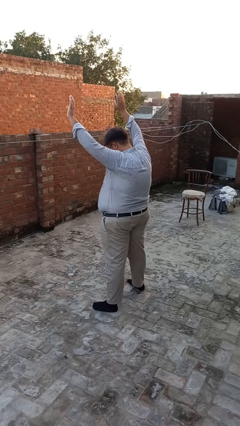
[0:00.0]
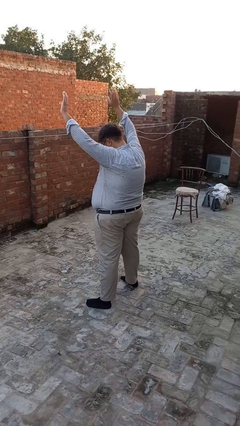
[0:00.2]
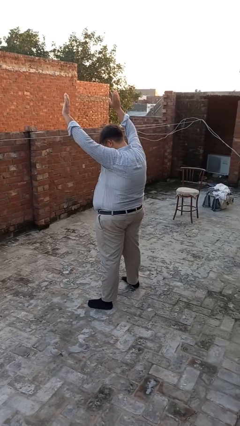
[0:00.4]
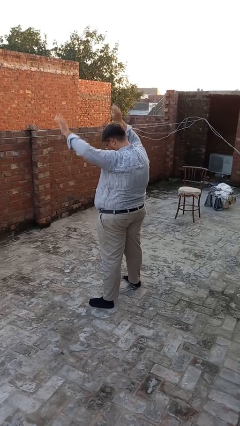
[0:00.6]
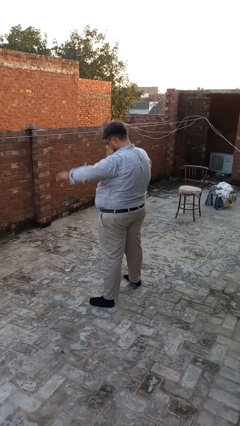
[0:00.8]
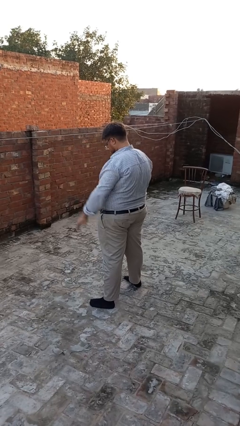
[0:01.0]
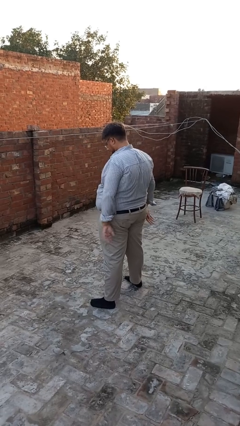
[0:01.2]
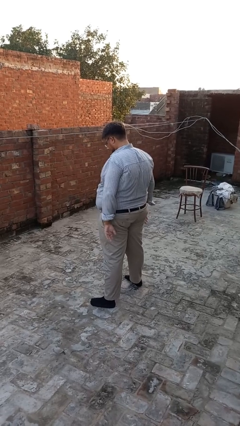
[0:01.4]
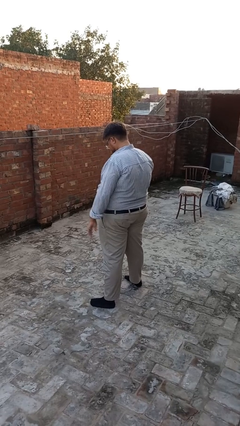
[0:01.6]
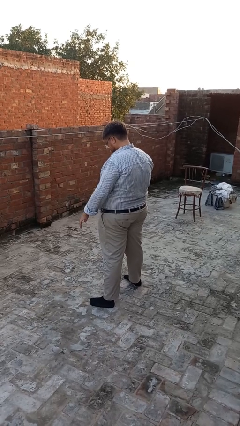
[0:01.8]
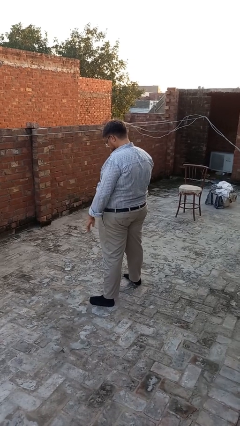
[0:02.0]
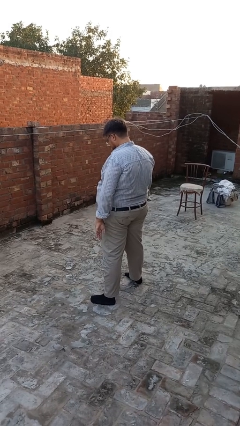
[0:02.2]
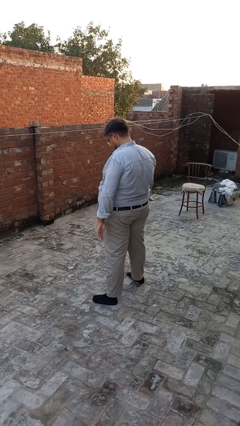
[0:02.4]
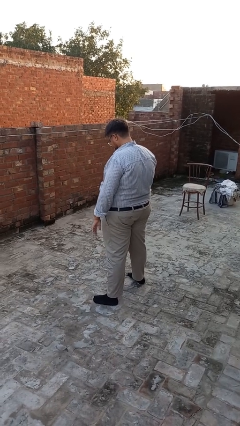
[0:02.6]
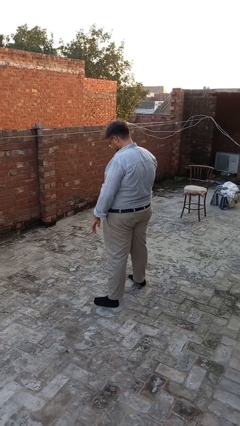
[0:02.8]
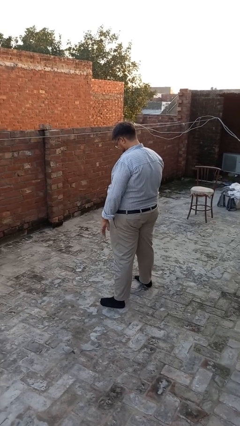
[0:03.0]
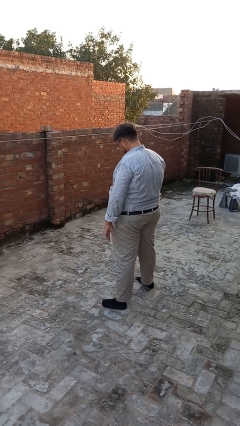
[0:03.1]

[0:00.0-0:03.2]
person gestures swipe down

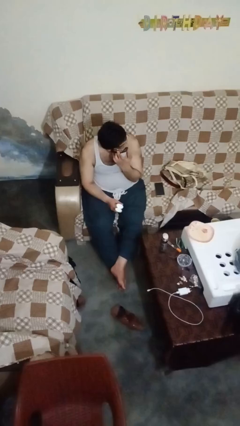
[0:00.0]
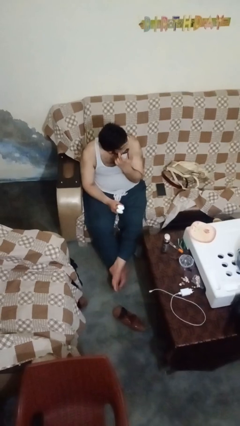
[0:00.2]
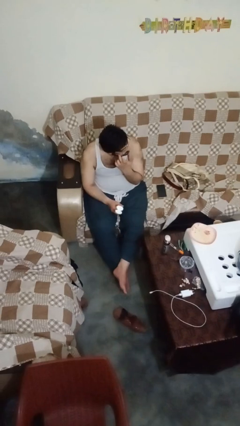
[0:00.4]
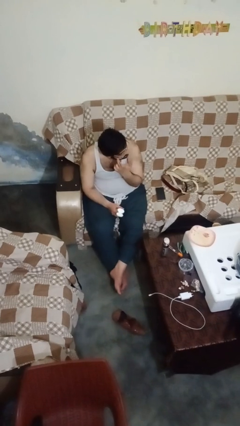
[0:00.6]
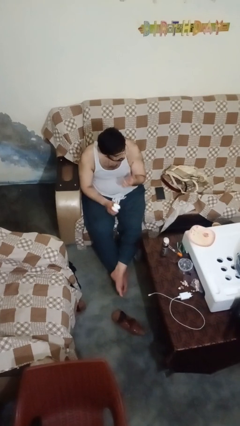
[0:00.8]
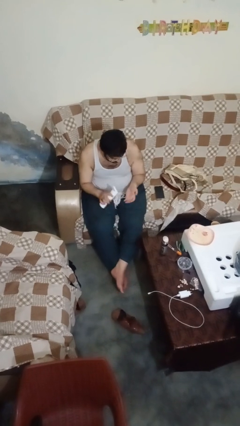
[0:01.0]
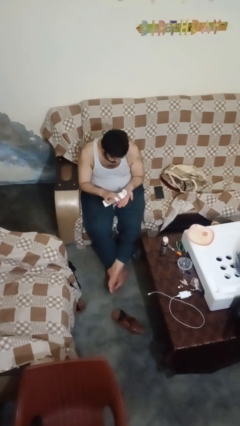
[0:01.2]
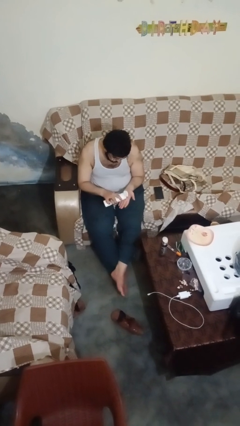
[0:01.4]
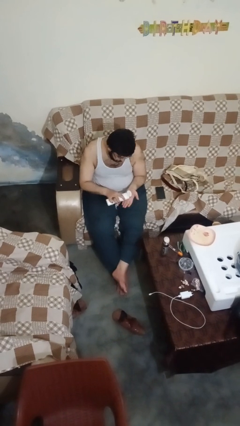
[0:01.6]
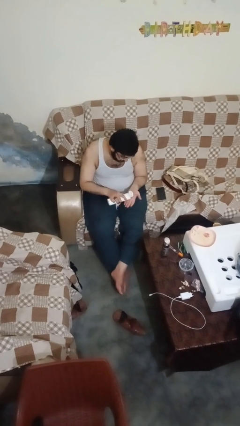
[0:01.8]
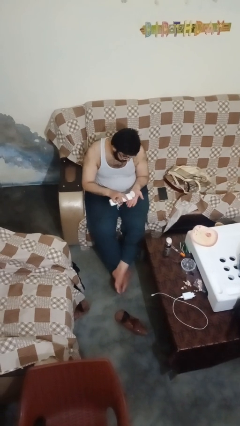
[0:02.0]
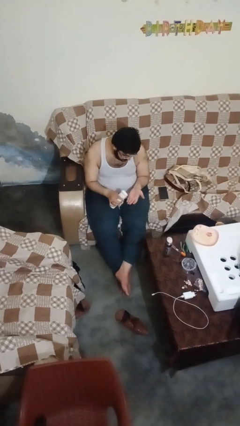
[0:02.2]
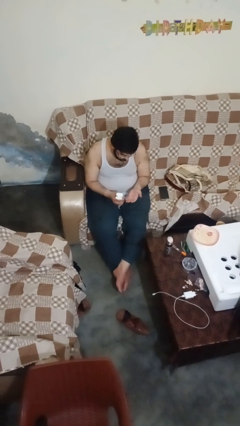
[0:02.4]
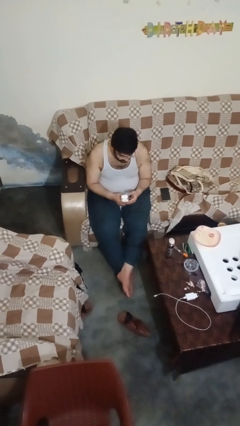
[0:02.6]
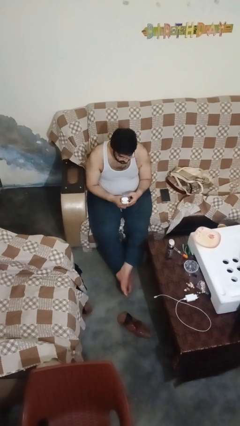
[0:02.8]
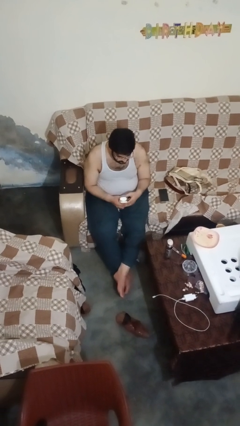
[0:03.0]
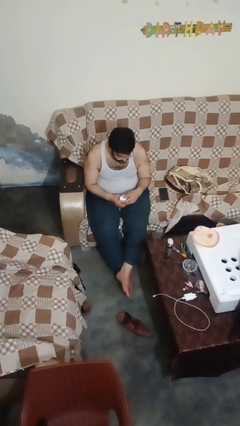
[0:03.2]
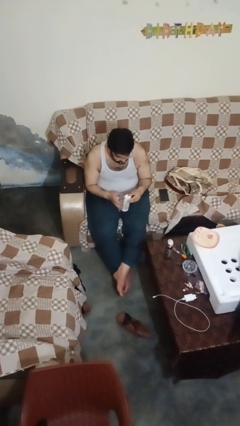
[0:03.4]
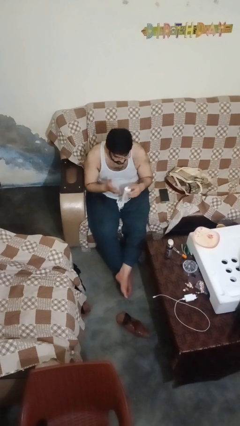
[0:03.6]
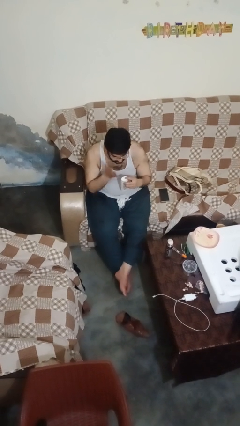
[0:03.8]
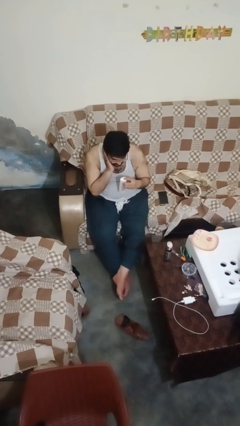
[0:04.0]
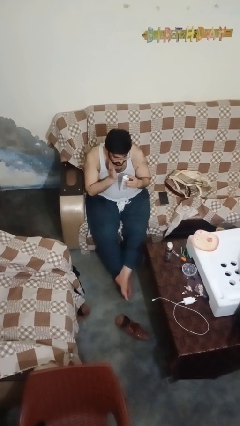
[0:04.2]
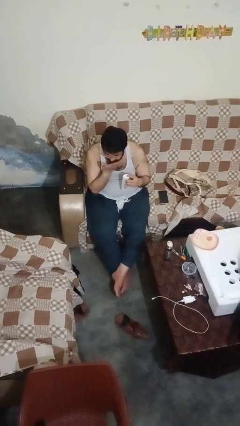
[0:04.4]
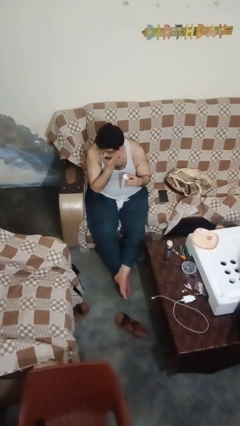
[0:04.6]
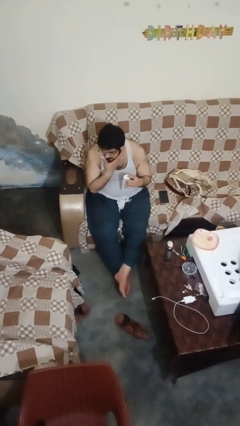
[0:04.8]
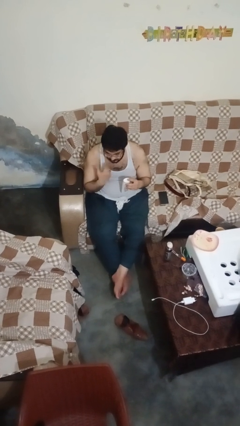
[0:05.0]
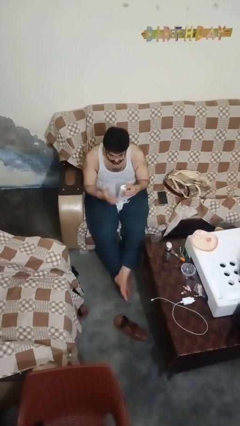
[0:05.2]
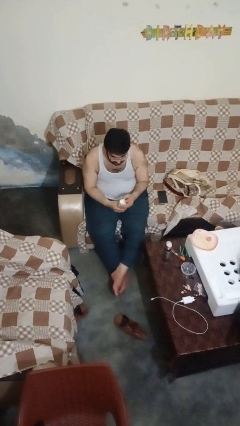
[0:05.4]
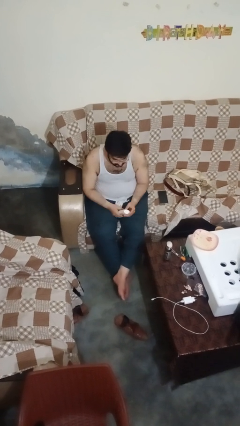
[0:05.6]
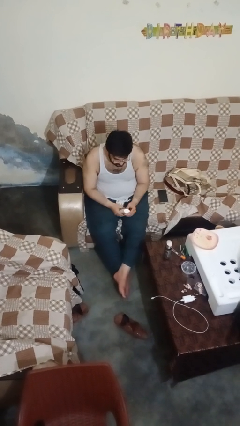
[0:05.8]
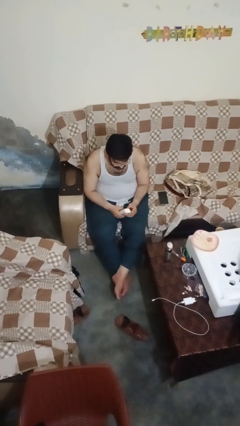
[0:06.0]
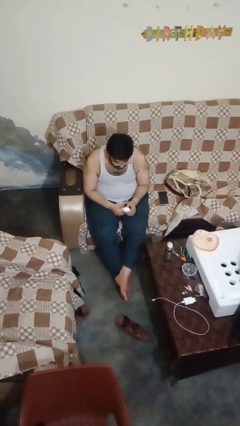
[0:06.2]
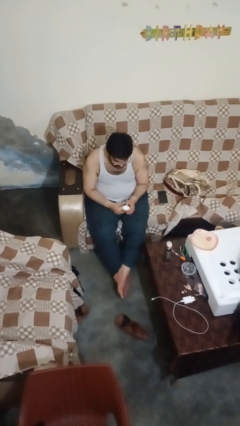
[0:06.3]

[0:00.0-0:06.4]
person applies sunscreen

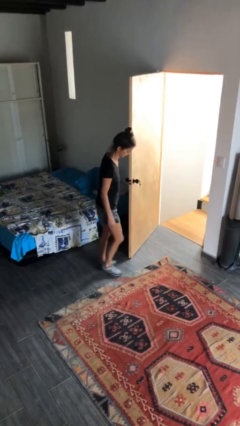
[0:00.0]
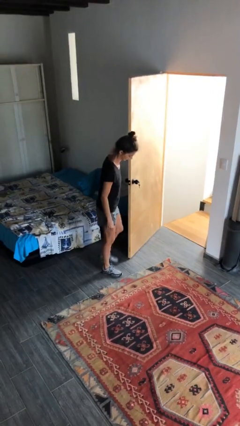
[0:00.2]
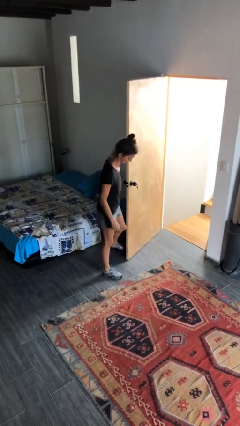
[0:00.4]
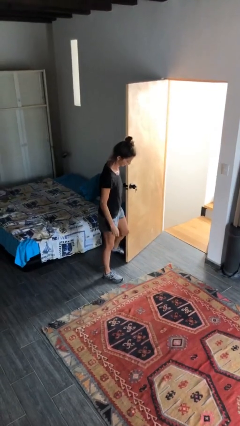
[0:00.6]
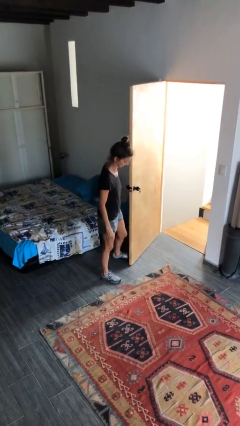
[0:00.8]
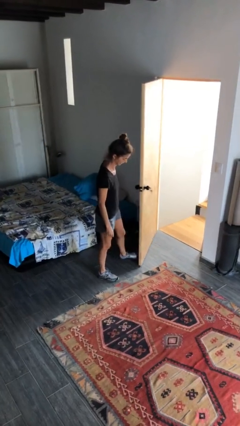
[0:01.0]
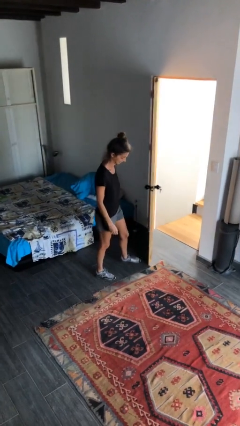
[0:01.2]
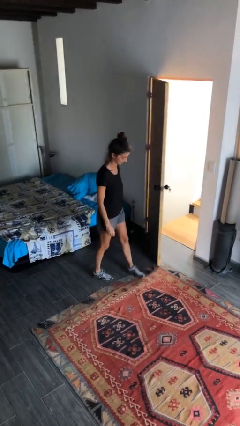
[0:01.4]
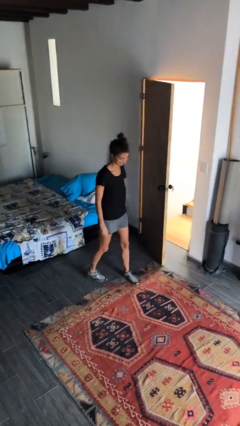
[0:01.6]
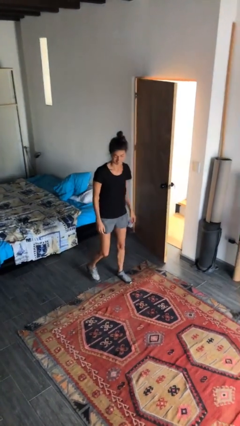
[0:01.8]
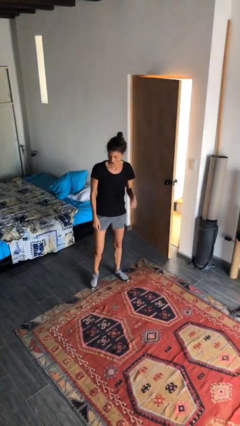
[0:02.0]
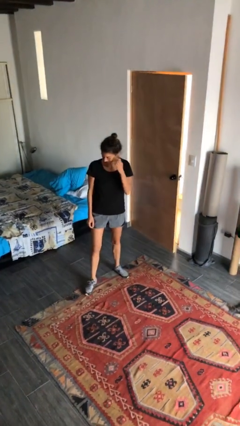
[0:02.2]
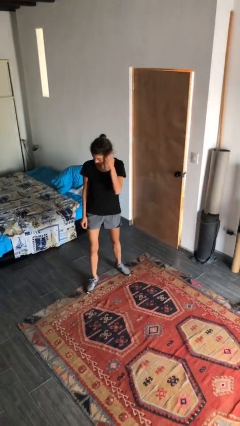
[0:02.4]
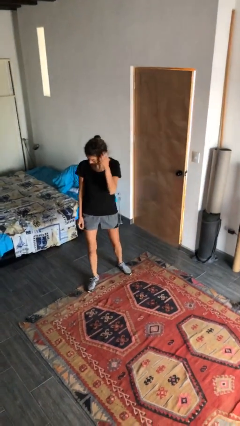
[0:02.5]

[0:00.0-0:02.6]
person closes door with foot

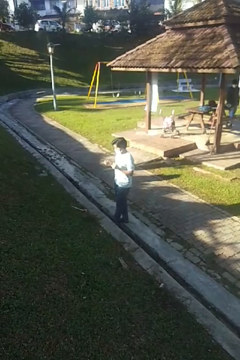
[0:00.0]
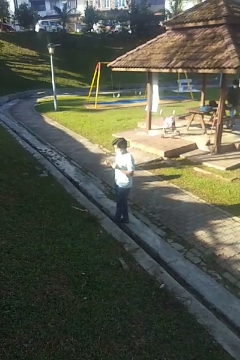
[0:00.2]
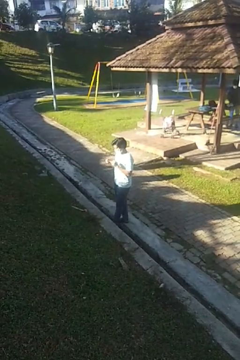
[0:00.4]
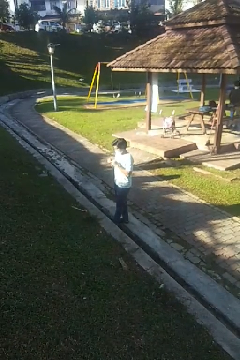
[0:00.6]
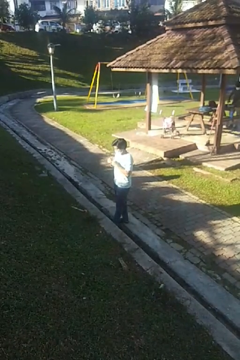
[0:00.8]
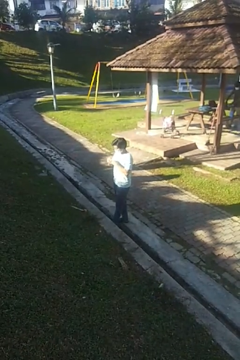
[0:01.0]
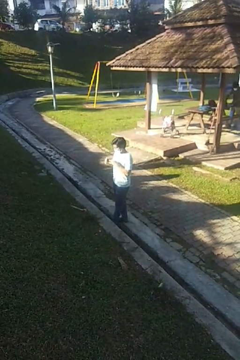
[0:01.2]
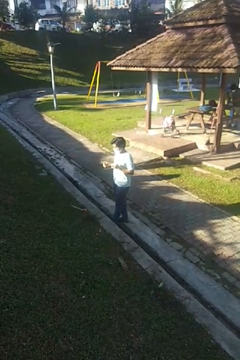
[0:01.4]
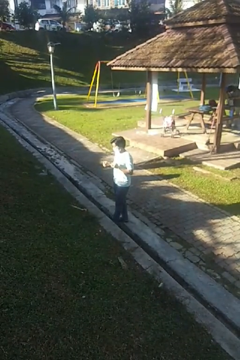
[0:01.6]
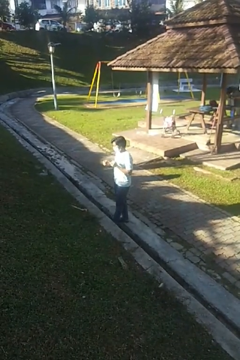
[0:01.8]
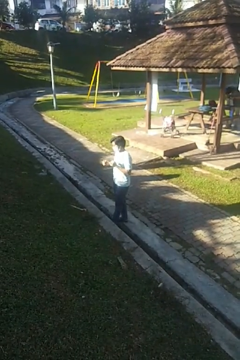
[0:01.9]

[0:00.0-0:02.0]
person puts on ring

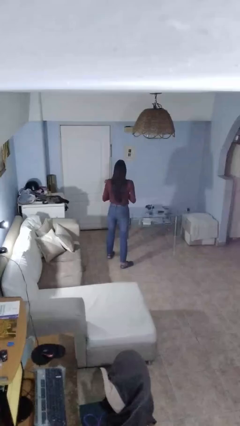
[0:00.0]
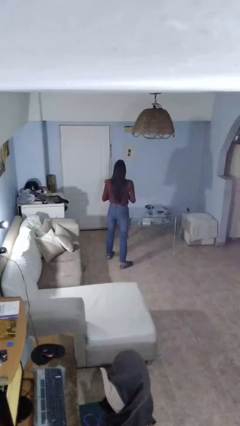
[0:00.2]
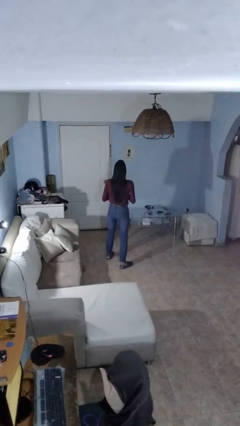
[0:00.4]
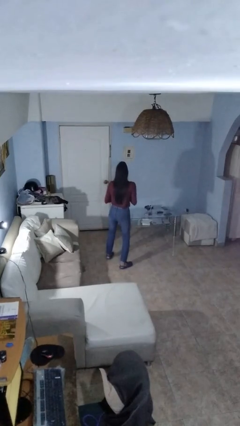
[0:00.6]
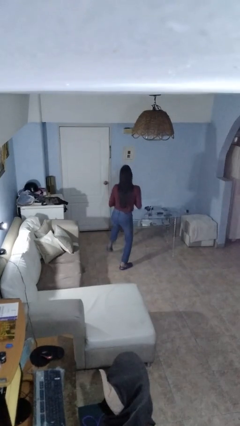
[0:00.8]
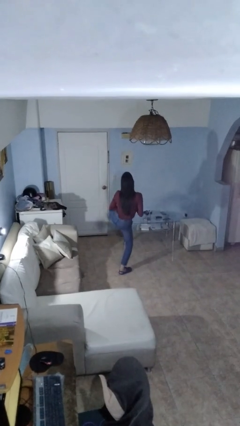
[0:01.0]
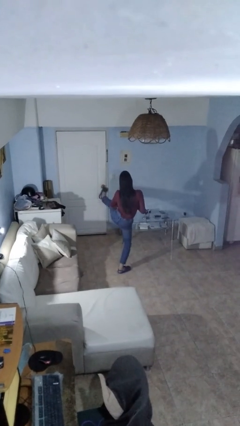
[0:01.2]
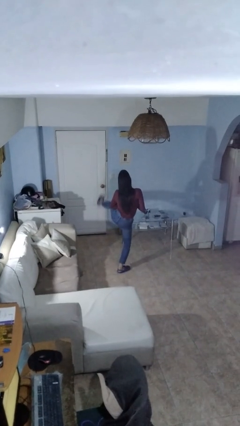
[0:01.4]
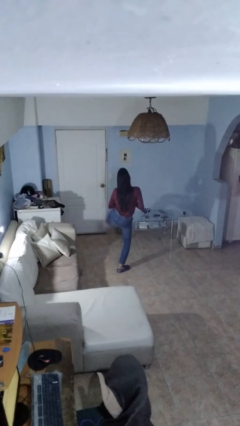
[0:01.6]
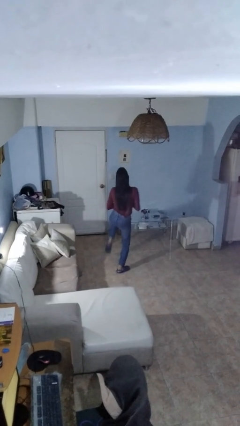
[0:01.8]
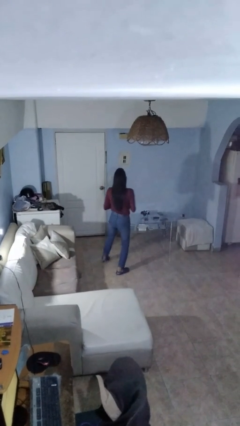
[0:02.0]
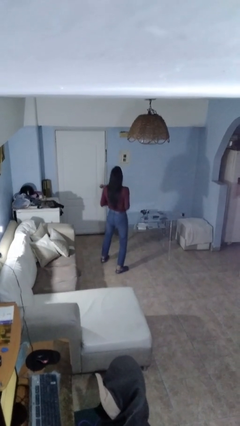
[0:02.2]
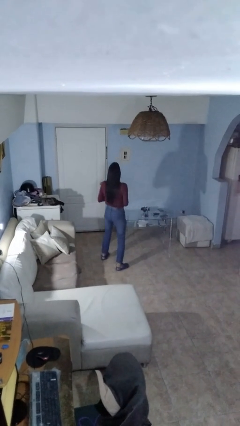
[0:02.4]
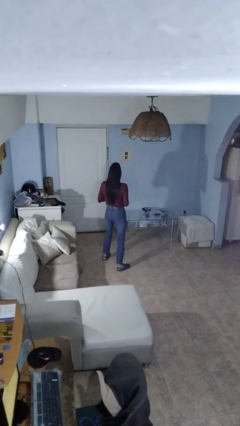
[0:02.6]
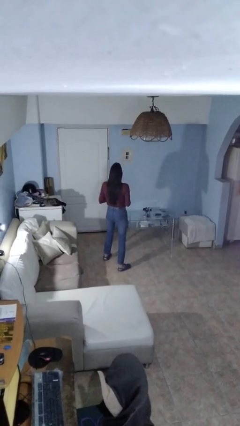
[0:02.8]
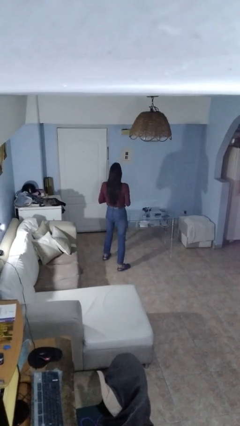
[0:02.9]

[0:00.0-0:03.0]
person karate kicks

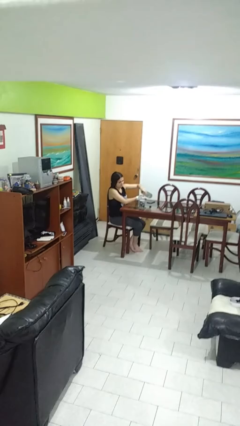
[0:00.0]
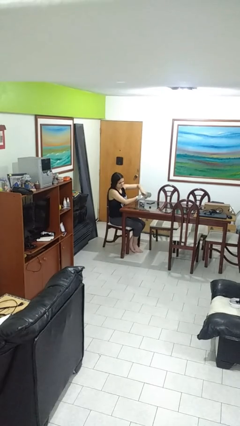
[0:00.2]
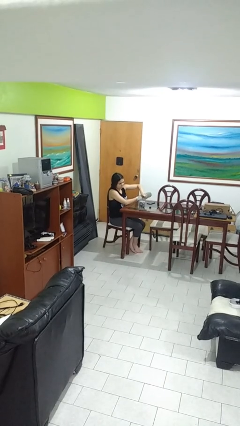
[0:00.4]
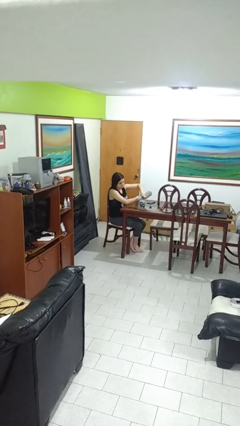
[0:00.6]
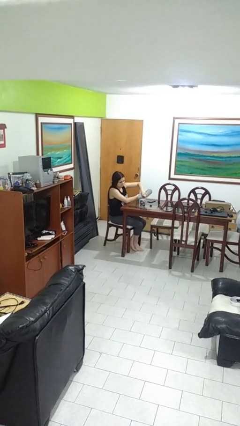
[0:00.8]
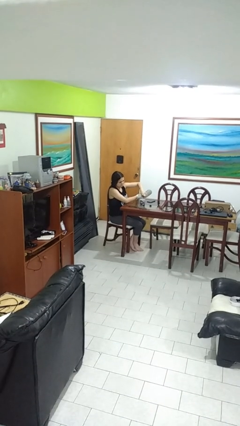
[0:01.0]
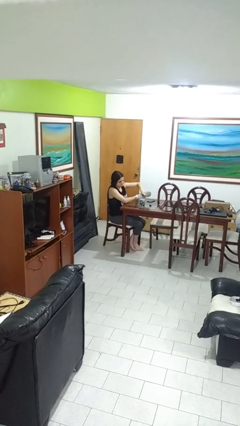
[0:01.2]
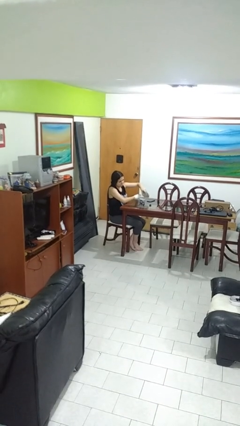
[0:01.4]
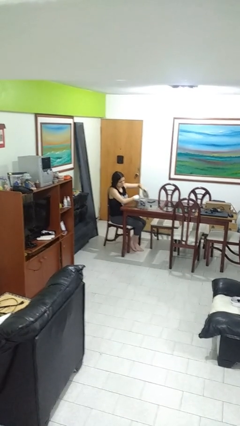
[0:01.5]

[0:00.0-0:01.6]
person pours liquid into cup
